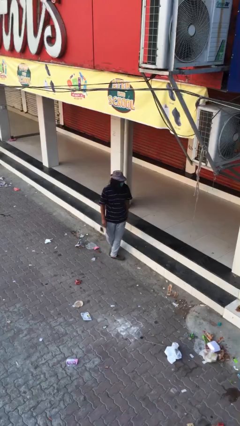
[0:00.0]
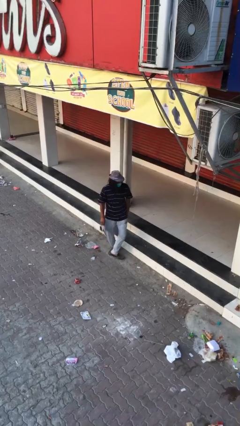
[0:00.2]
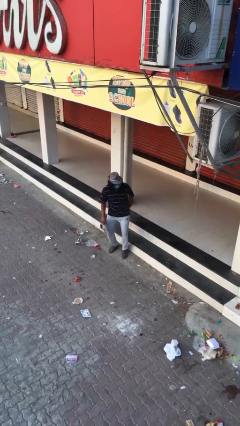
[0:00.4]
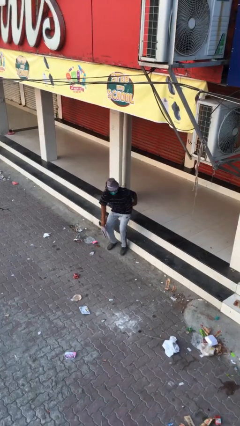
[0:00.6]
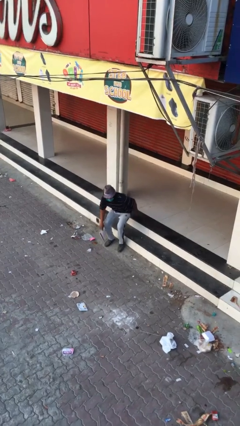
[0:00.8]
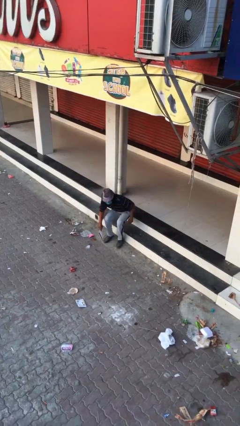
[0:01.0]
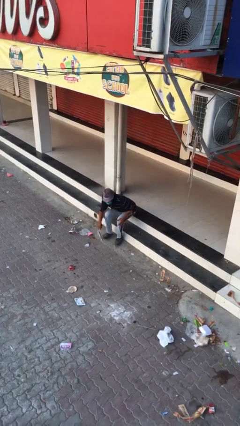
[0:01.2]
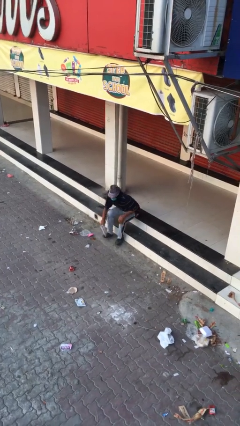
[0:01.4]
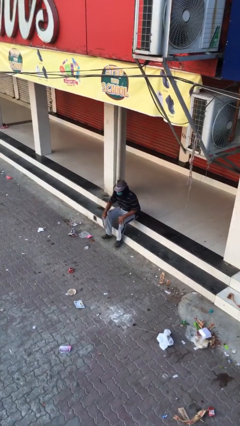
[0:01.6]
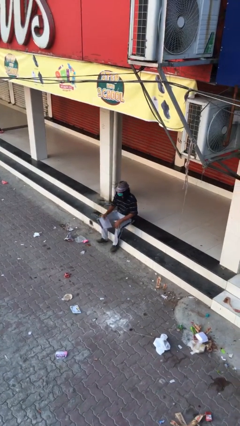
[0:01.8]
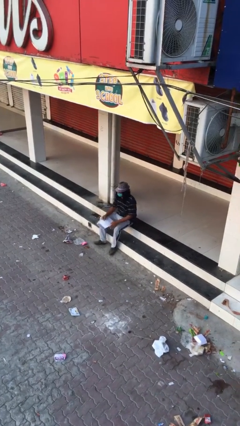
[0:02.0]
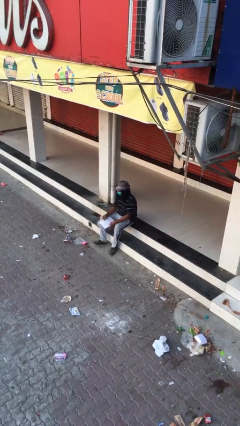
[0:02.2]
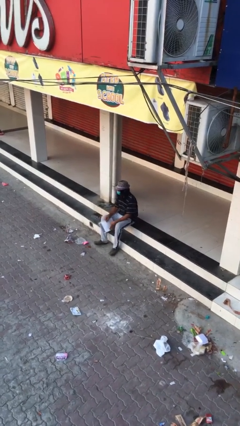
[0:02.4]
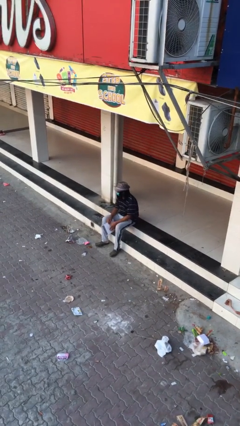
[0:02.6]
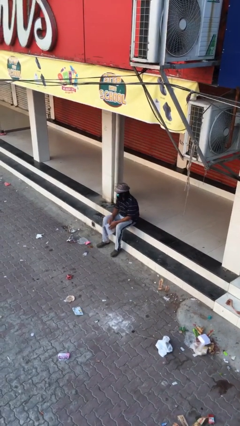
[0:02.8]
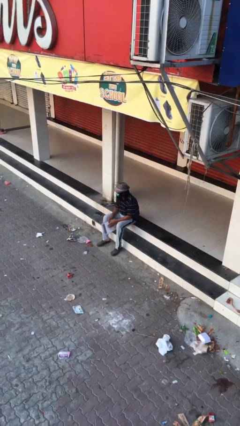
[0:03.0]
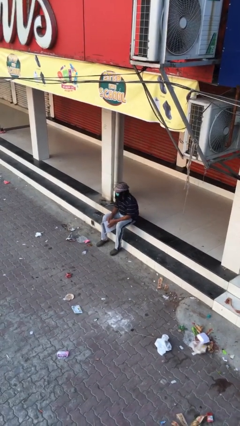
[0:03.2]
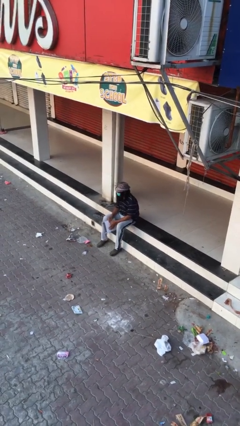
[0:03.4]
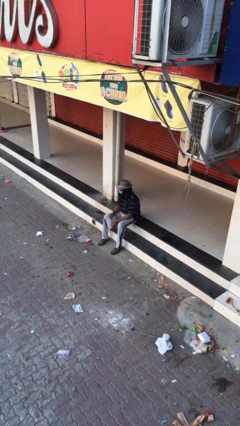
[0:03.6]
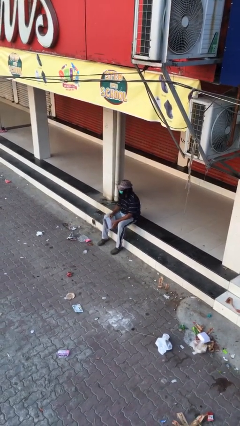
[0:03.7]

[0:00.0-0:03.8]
person sits down

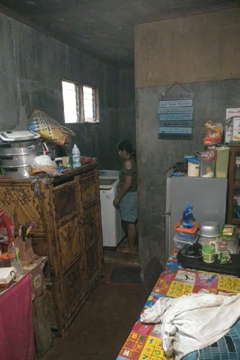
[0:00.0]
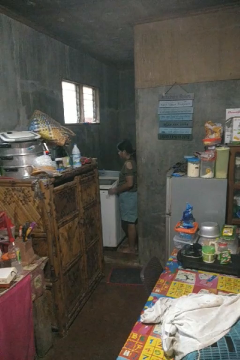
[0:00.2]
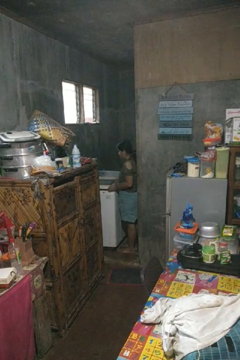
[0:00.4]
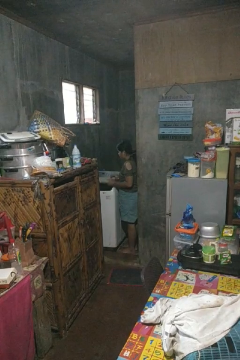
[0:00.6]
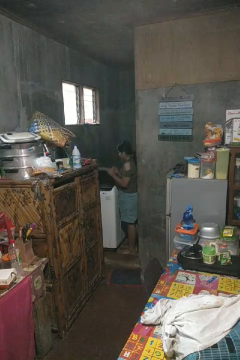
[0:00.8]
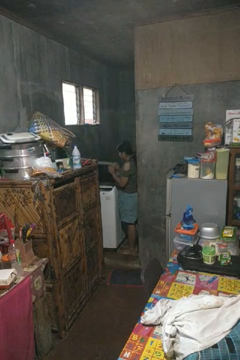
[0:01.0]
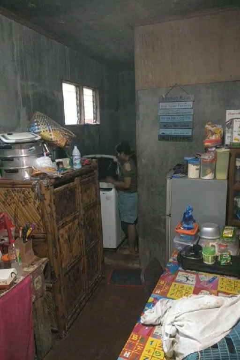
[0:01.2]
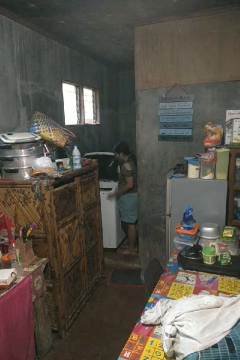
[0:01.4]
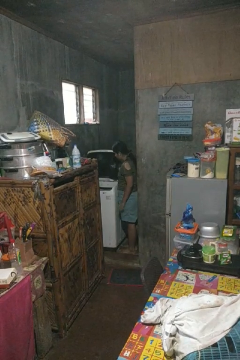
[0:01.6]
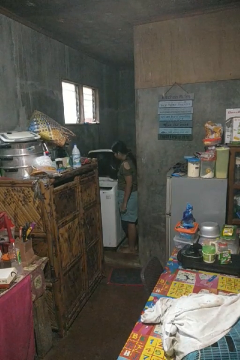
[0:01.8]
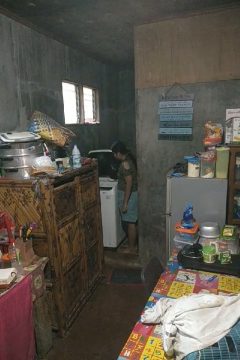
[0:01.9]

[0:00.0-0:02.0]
person opens clothes washer

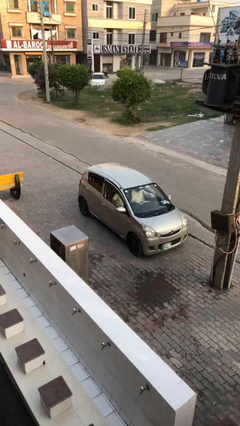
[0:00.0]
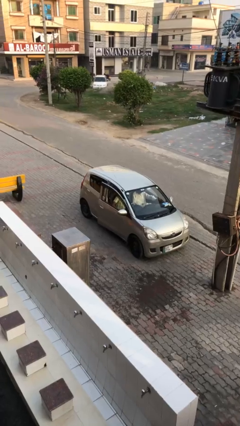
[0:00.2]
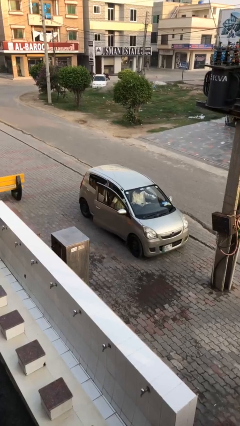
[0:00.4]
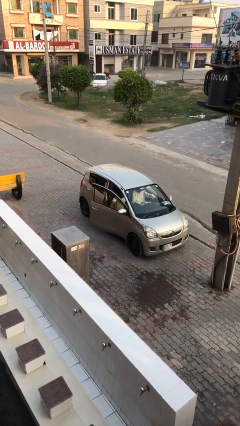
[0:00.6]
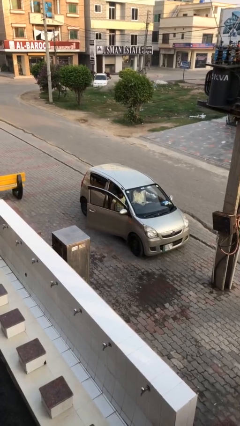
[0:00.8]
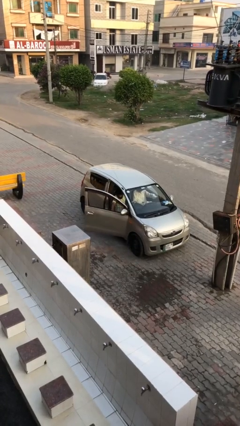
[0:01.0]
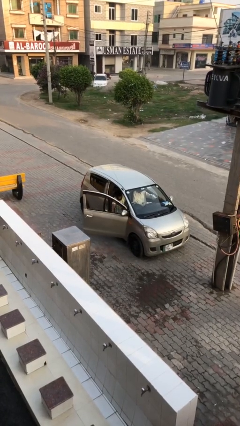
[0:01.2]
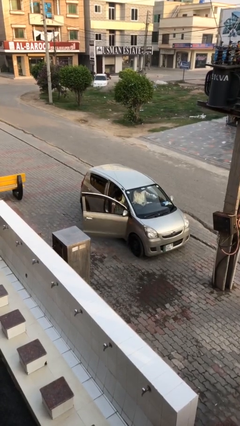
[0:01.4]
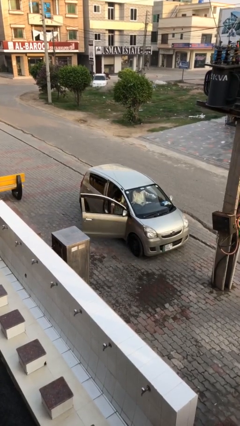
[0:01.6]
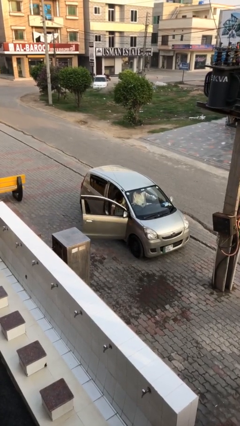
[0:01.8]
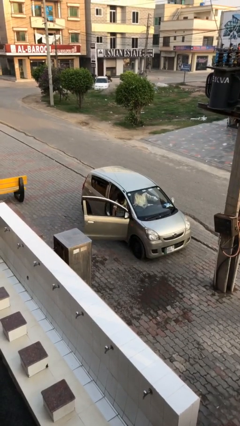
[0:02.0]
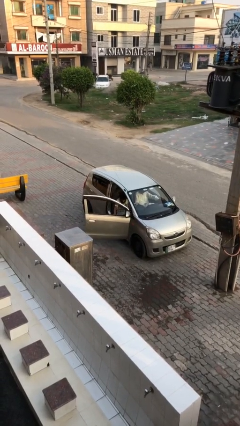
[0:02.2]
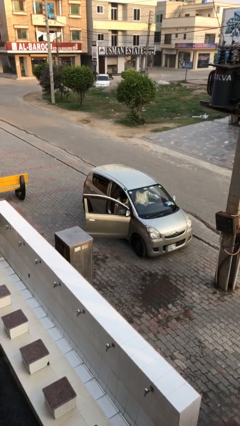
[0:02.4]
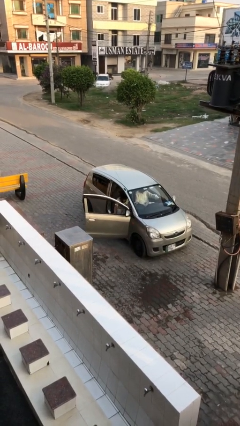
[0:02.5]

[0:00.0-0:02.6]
person opens car door

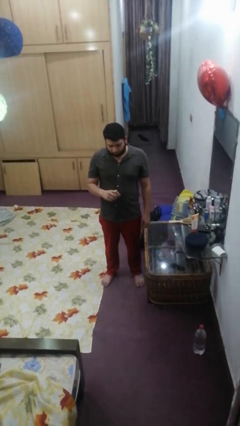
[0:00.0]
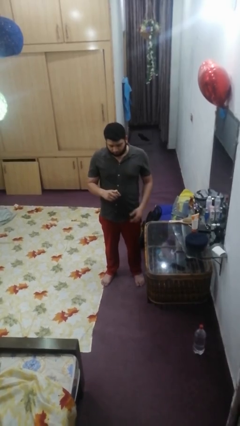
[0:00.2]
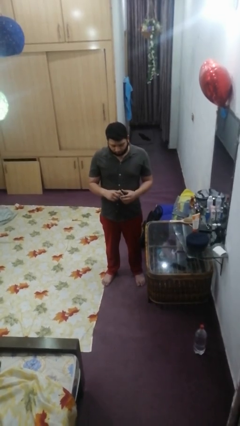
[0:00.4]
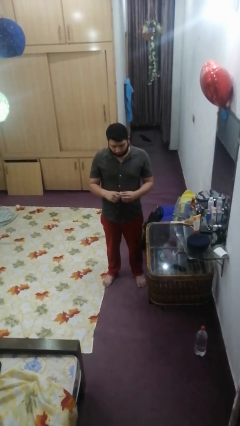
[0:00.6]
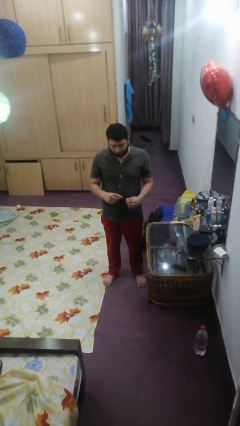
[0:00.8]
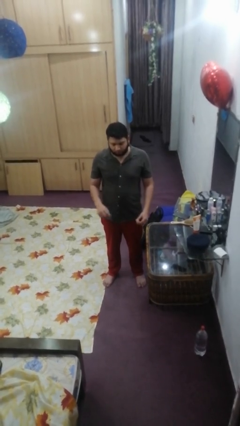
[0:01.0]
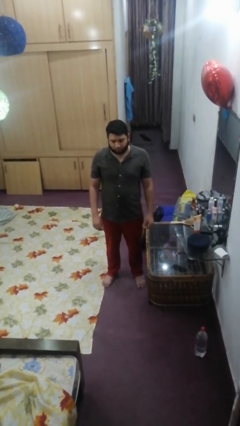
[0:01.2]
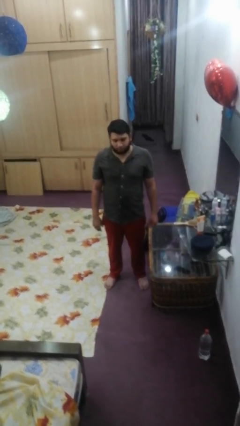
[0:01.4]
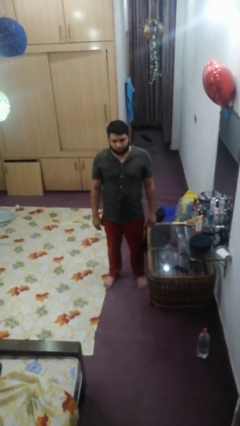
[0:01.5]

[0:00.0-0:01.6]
person takes off ring

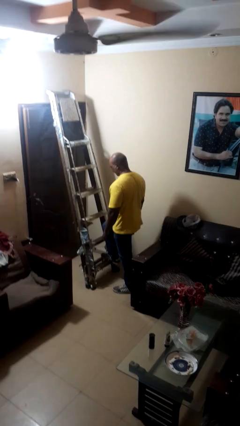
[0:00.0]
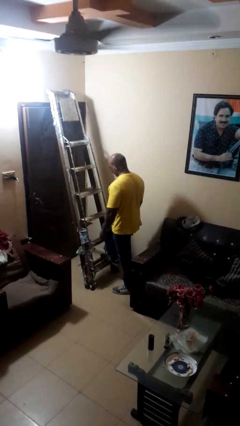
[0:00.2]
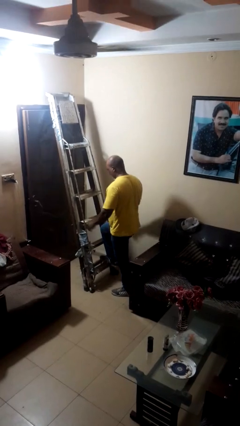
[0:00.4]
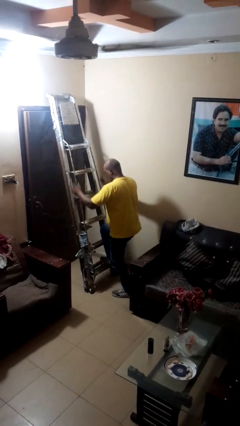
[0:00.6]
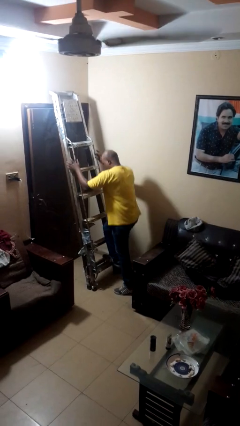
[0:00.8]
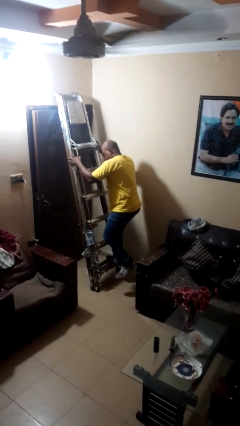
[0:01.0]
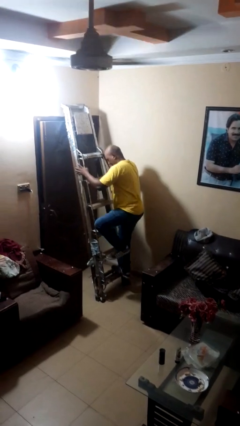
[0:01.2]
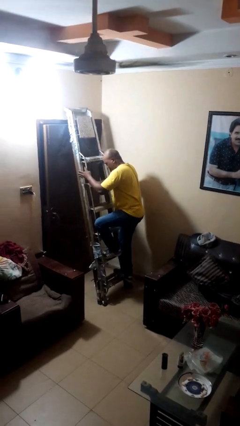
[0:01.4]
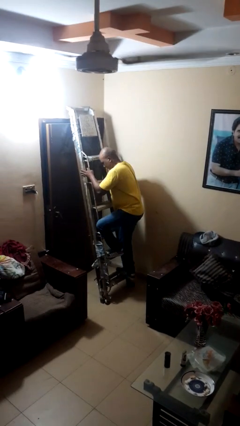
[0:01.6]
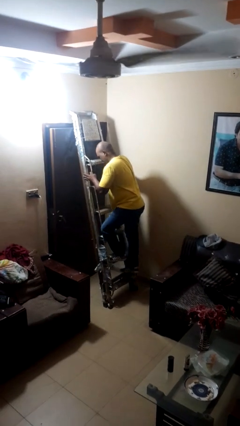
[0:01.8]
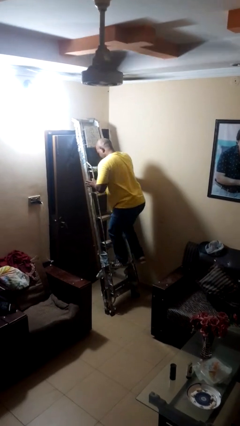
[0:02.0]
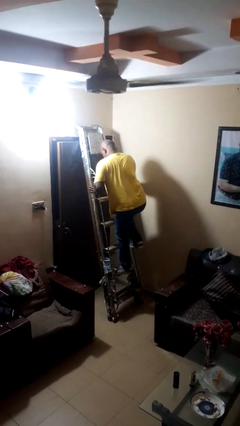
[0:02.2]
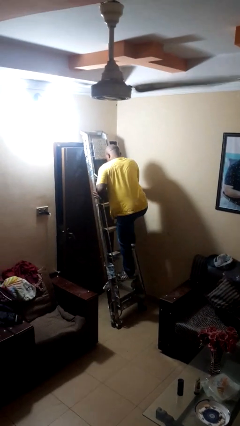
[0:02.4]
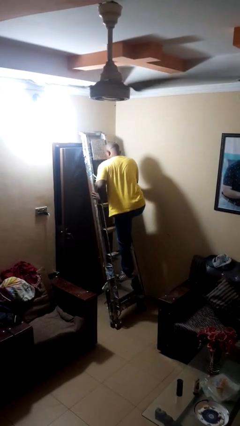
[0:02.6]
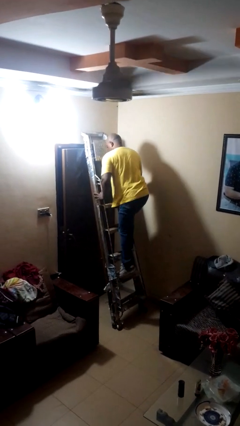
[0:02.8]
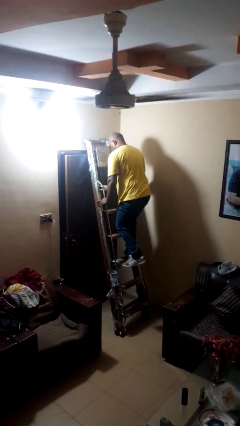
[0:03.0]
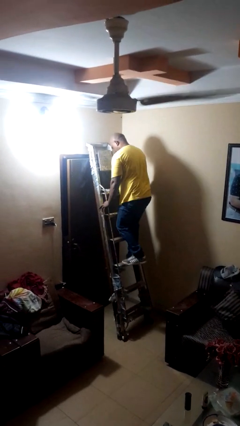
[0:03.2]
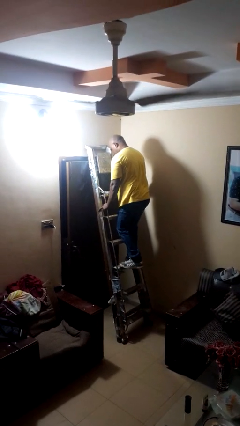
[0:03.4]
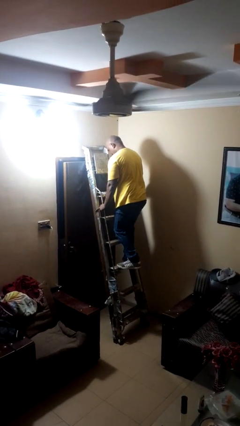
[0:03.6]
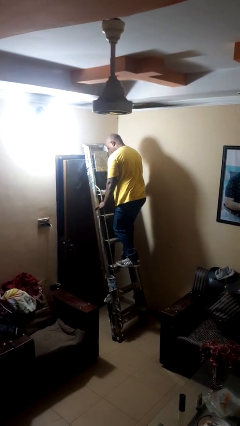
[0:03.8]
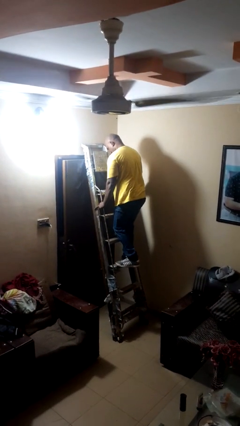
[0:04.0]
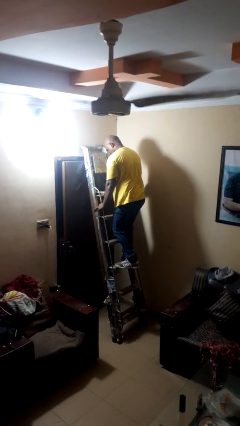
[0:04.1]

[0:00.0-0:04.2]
person climbs up stairs

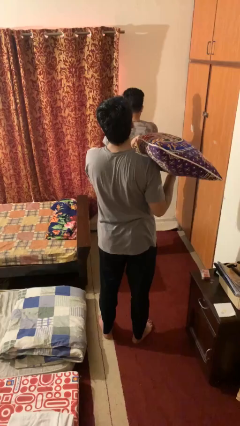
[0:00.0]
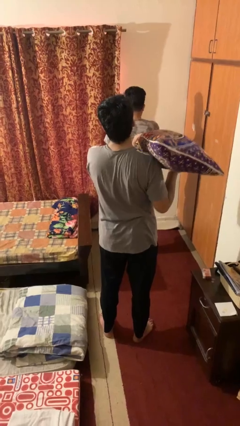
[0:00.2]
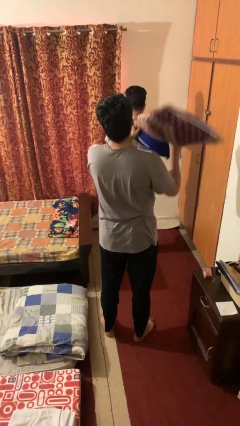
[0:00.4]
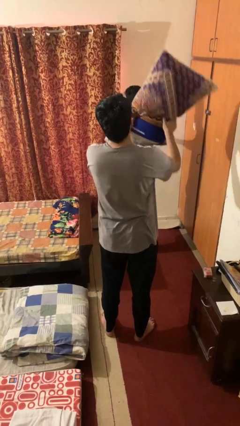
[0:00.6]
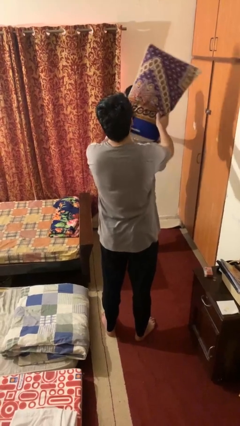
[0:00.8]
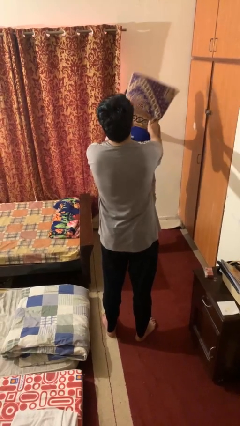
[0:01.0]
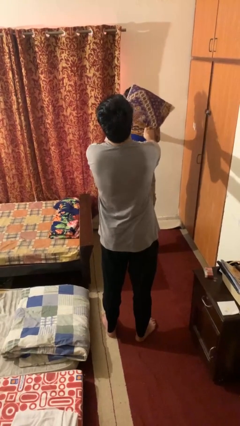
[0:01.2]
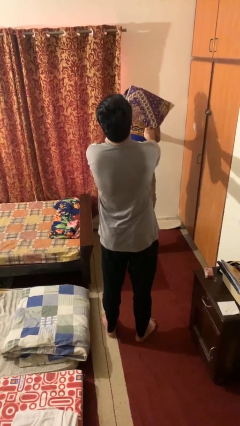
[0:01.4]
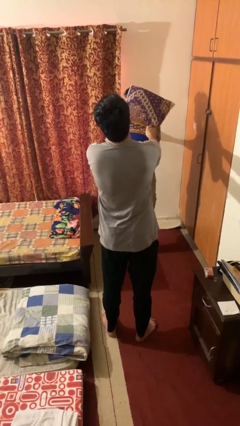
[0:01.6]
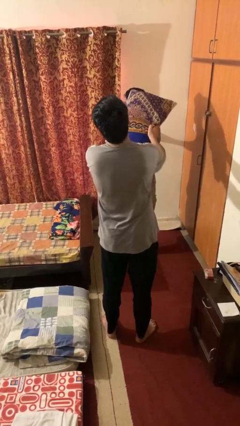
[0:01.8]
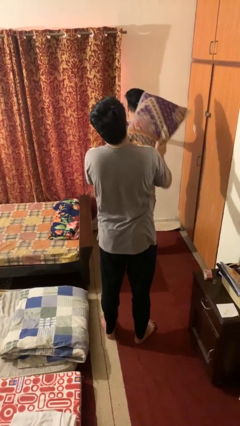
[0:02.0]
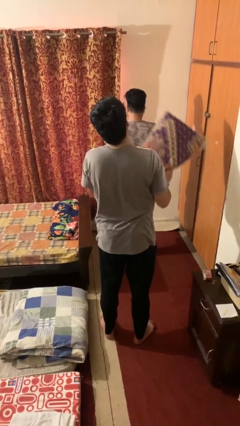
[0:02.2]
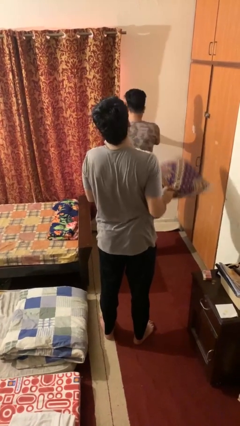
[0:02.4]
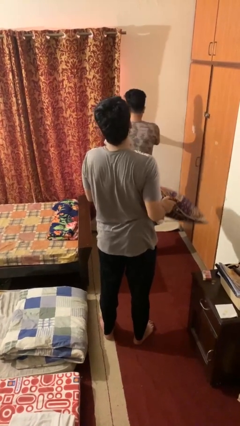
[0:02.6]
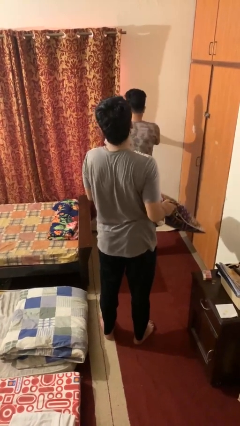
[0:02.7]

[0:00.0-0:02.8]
person hits person with pillow

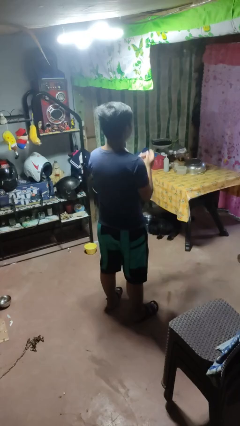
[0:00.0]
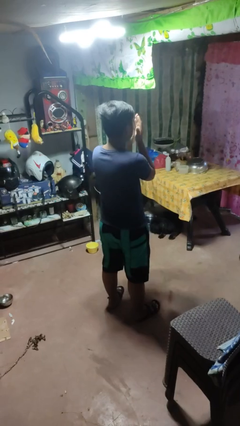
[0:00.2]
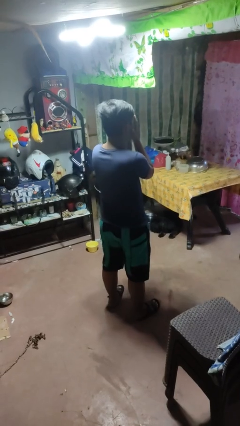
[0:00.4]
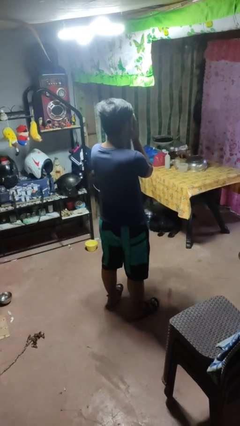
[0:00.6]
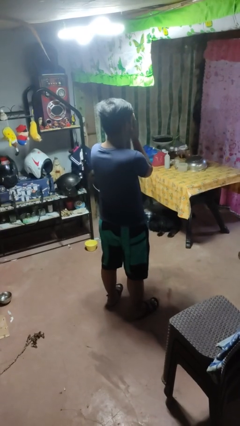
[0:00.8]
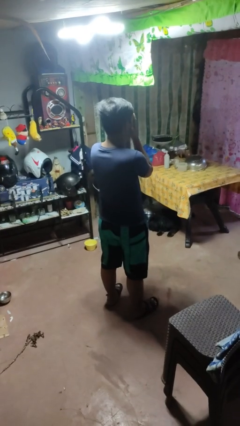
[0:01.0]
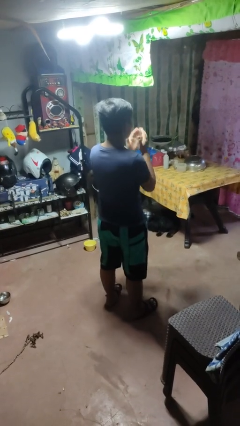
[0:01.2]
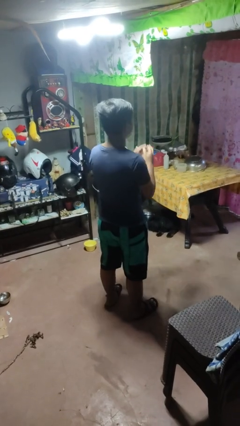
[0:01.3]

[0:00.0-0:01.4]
person covers face with hands
